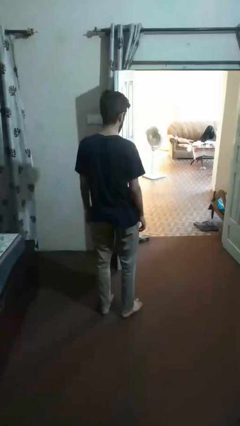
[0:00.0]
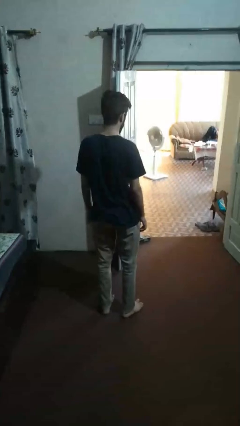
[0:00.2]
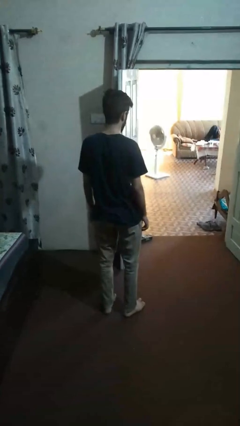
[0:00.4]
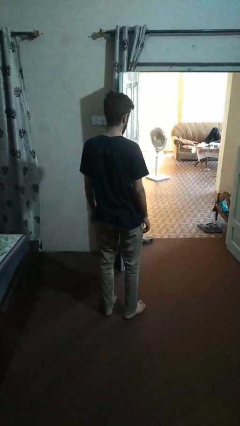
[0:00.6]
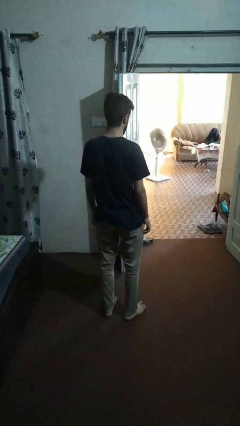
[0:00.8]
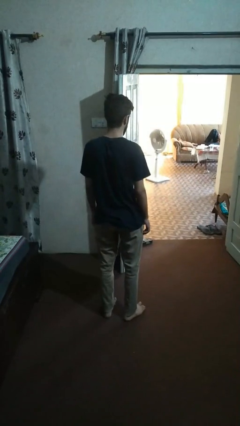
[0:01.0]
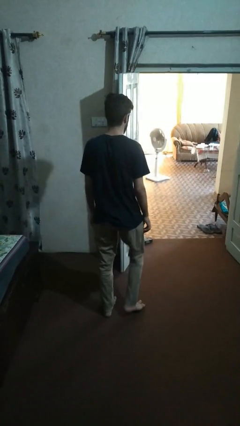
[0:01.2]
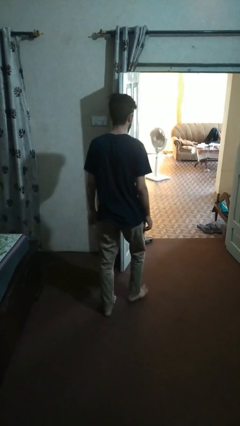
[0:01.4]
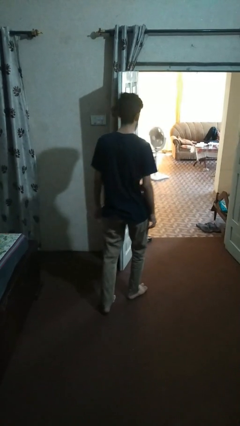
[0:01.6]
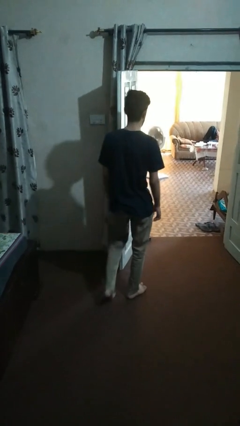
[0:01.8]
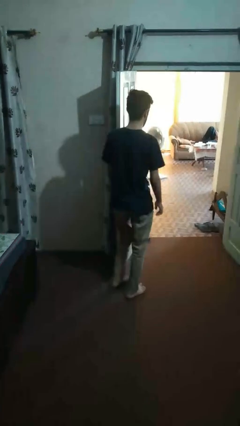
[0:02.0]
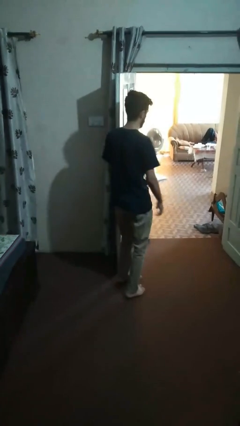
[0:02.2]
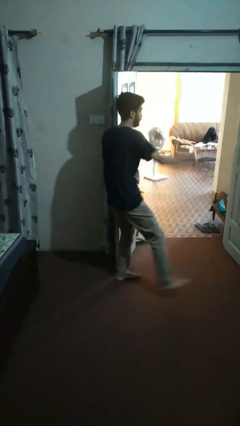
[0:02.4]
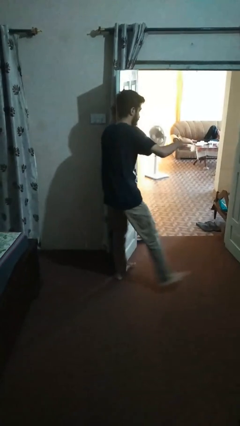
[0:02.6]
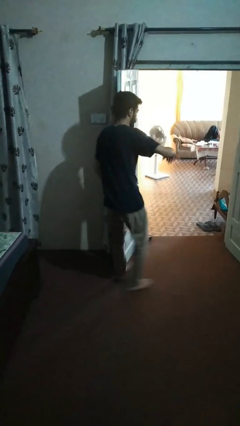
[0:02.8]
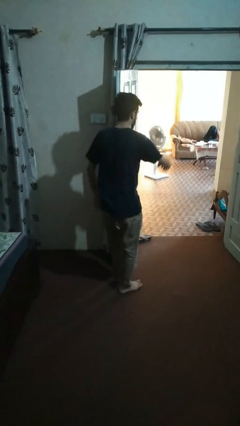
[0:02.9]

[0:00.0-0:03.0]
person bumps into wall

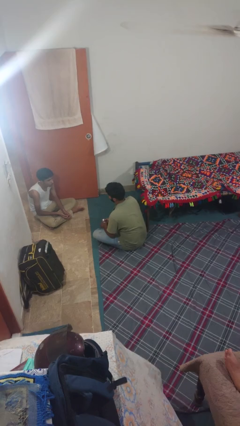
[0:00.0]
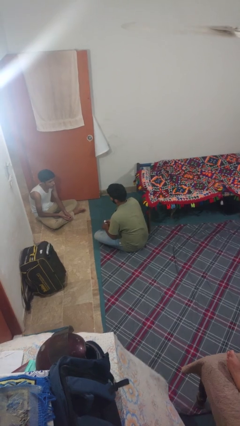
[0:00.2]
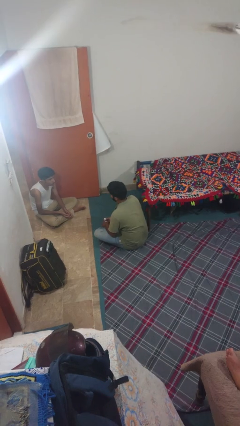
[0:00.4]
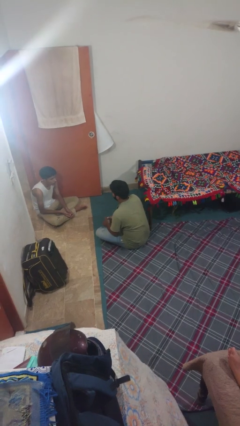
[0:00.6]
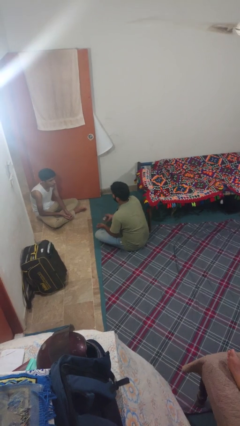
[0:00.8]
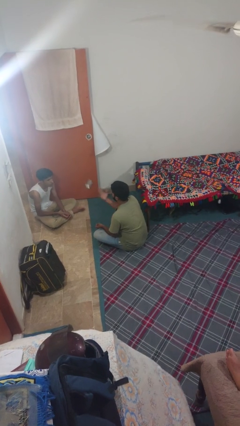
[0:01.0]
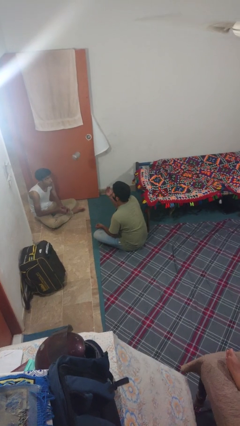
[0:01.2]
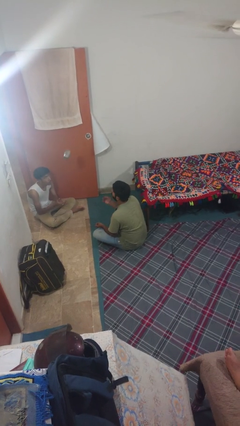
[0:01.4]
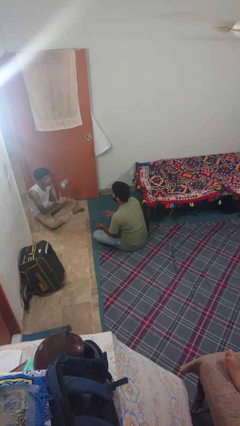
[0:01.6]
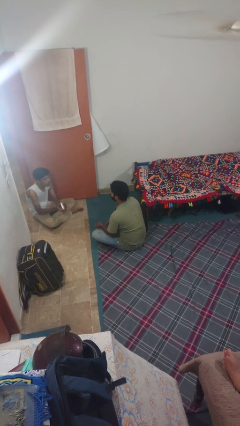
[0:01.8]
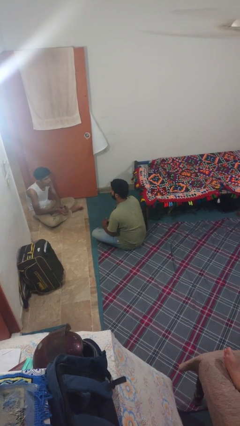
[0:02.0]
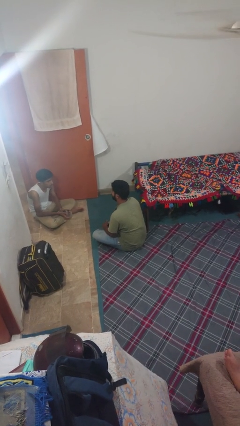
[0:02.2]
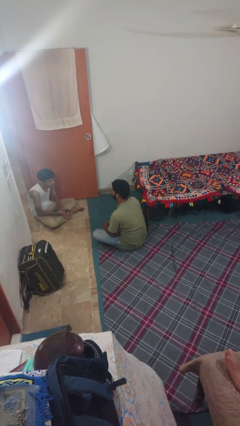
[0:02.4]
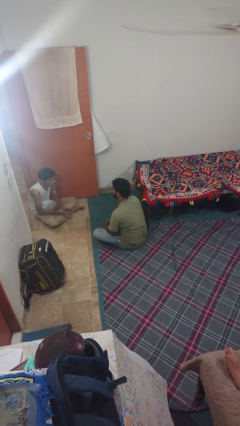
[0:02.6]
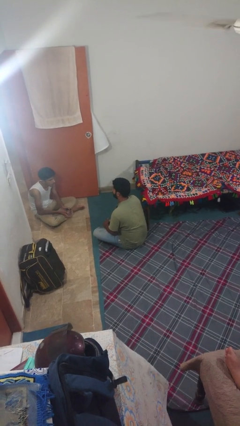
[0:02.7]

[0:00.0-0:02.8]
person throws object to person

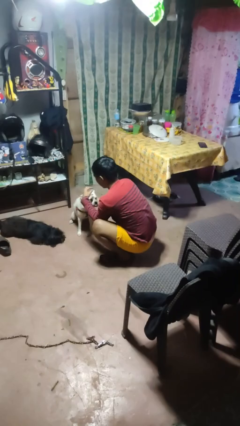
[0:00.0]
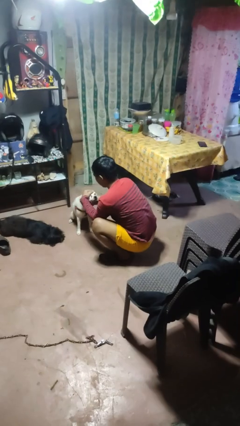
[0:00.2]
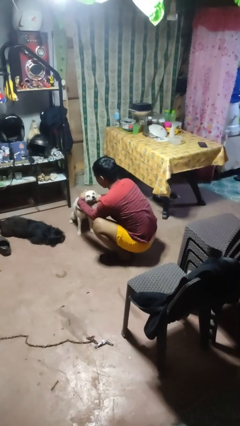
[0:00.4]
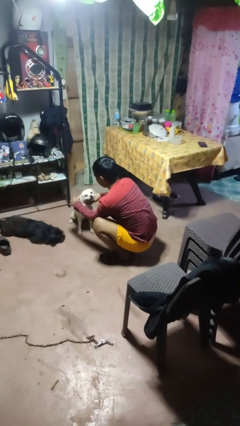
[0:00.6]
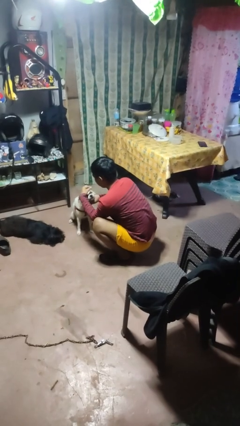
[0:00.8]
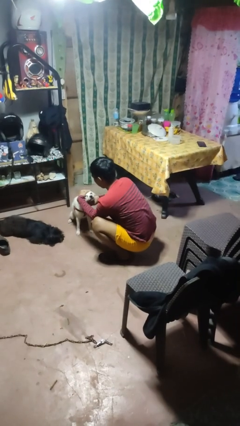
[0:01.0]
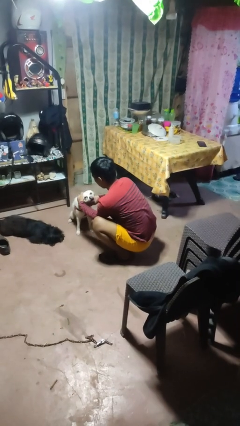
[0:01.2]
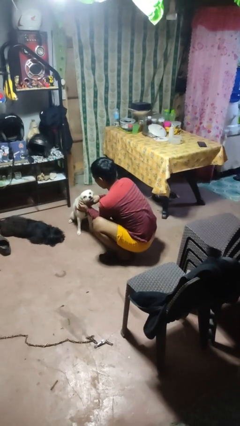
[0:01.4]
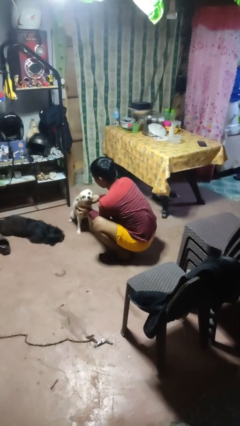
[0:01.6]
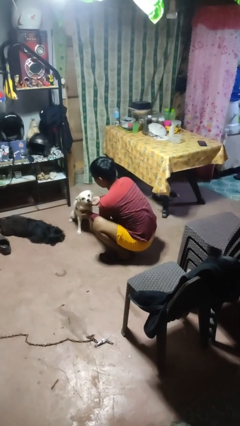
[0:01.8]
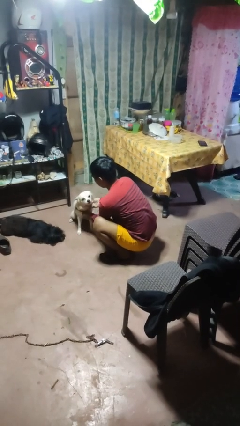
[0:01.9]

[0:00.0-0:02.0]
person pets dog

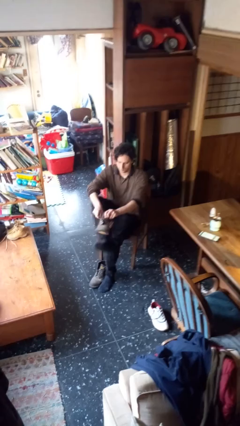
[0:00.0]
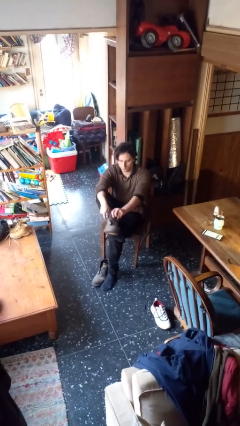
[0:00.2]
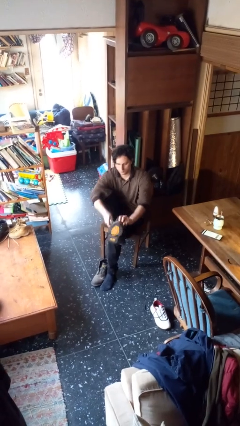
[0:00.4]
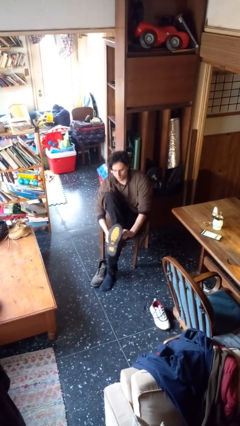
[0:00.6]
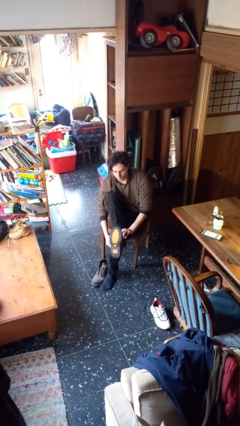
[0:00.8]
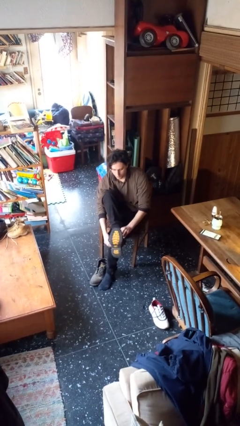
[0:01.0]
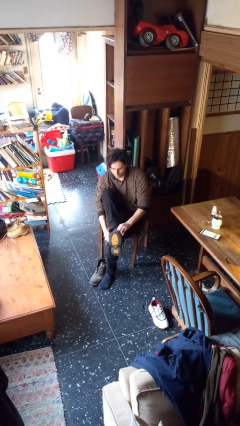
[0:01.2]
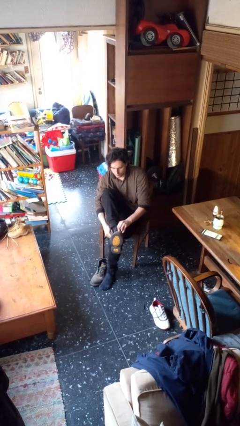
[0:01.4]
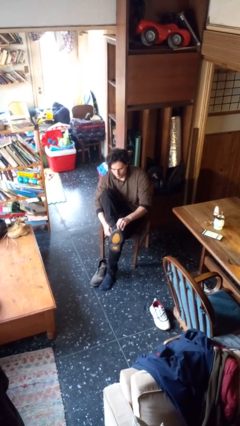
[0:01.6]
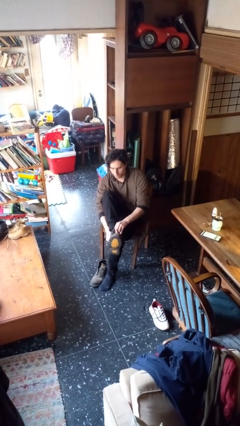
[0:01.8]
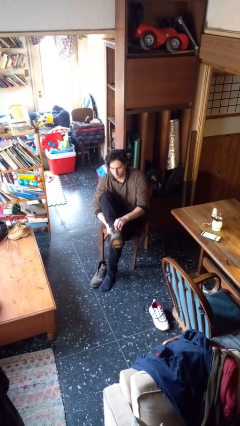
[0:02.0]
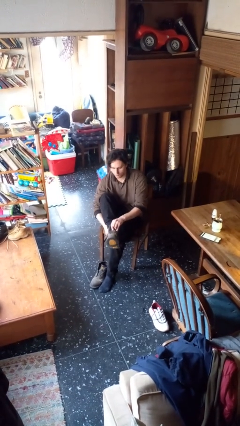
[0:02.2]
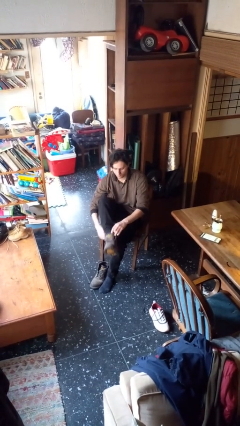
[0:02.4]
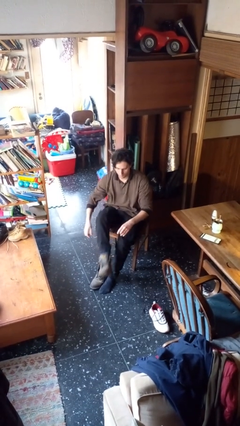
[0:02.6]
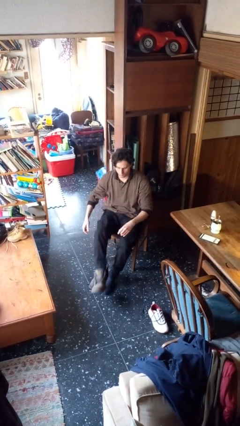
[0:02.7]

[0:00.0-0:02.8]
person puts on boots

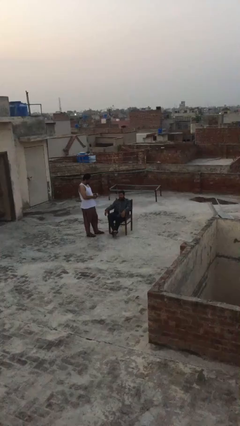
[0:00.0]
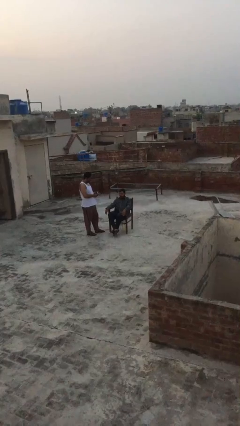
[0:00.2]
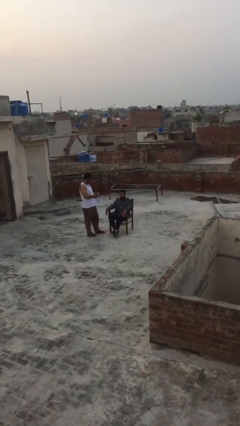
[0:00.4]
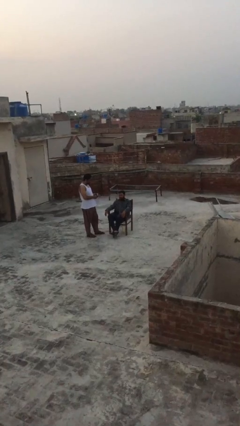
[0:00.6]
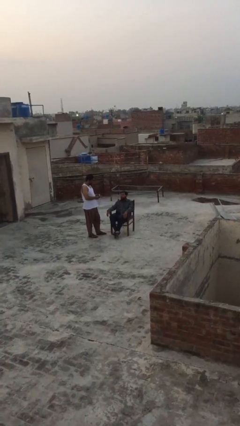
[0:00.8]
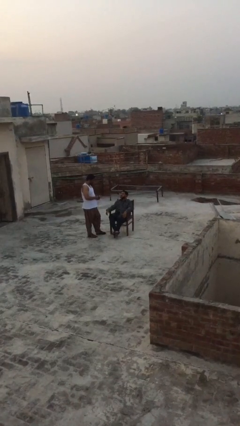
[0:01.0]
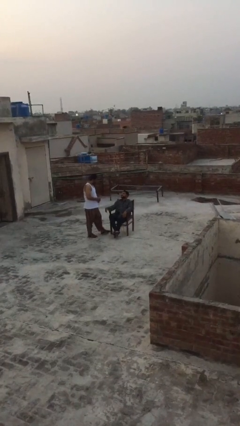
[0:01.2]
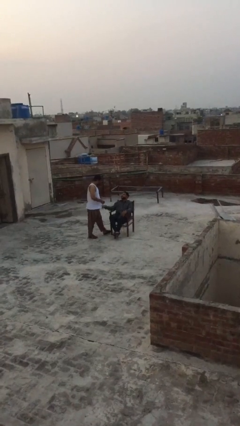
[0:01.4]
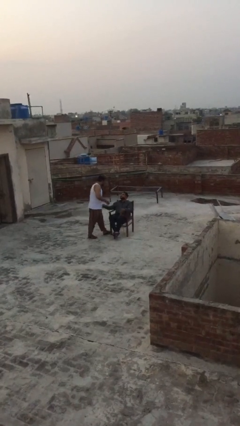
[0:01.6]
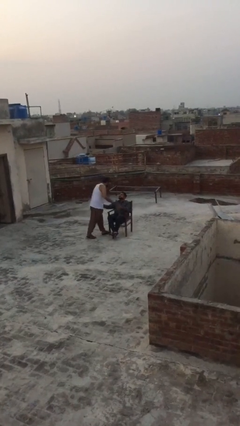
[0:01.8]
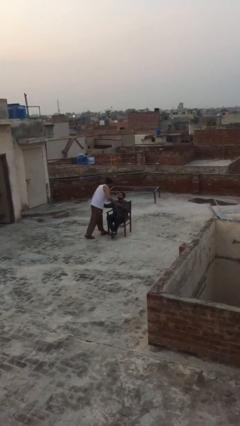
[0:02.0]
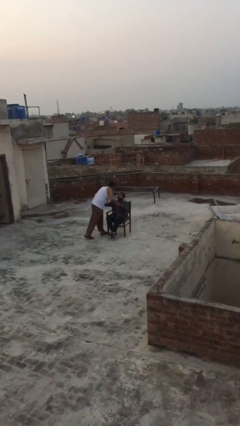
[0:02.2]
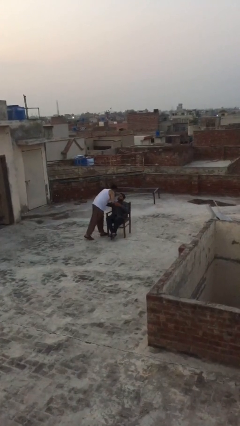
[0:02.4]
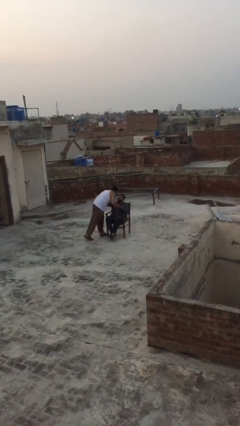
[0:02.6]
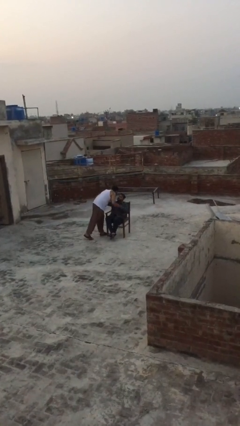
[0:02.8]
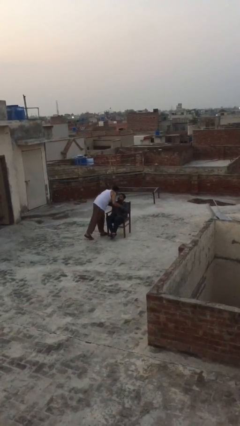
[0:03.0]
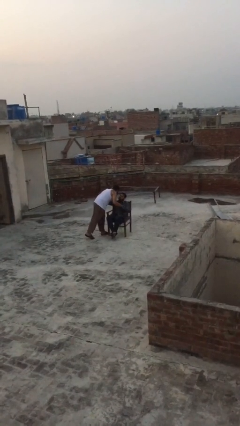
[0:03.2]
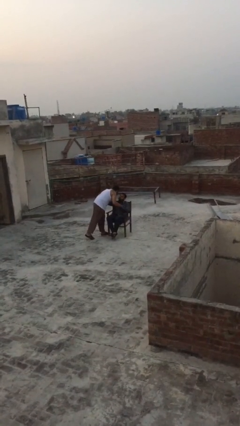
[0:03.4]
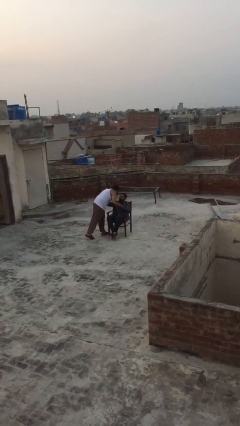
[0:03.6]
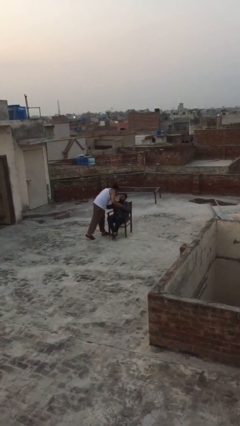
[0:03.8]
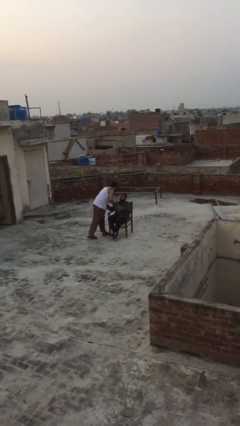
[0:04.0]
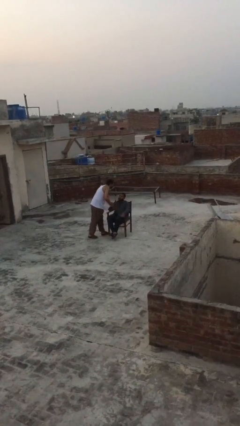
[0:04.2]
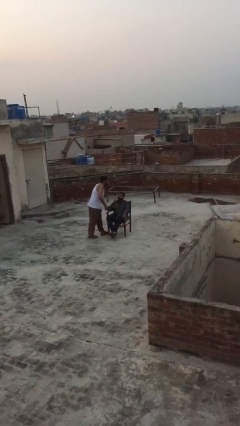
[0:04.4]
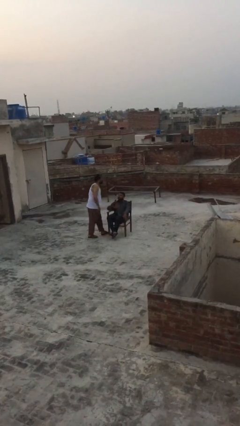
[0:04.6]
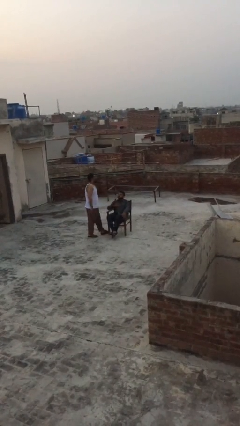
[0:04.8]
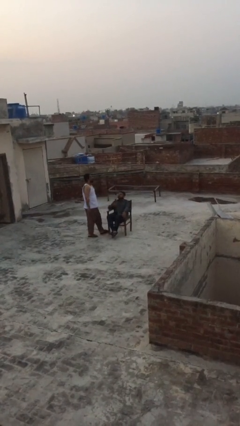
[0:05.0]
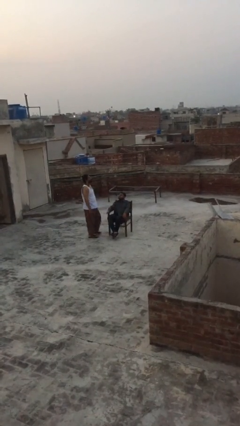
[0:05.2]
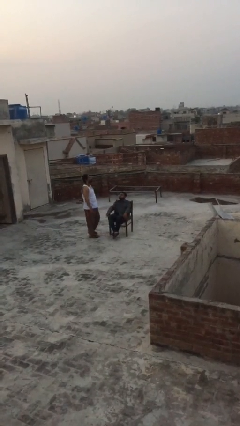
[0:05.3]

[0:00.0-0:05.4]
person embraces person

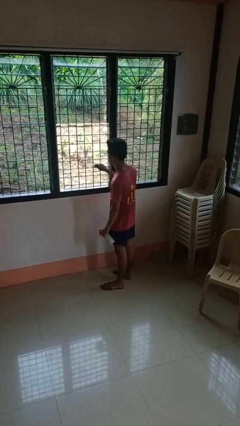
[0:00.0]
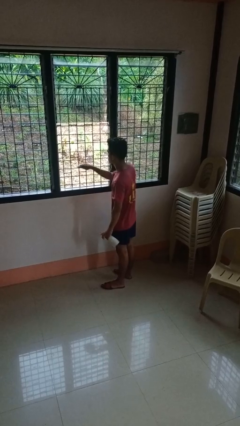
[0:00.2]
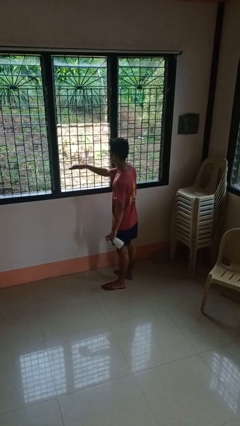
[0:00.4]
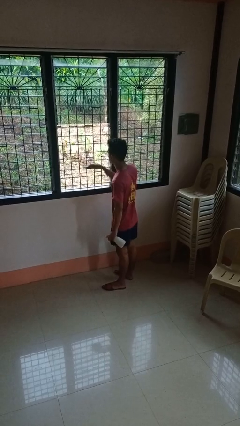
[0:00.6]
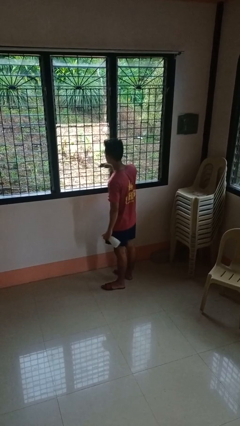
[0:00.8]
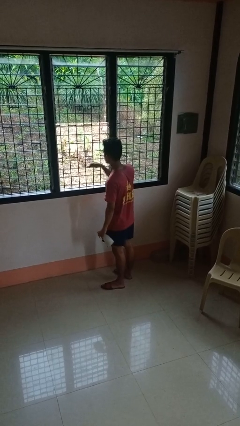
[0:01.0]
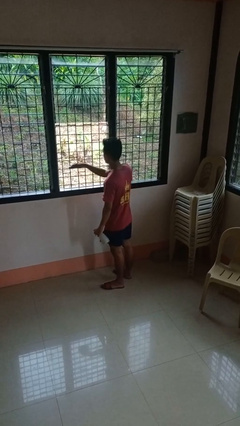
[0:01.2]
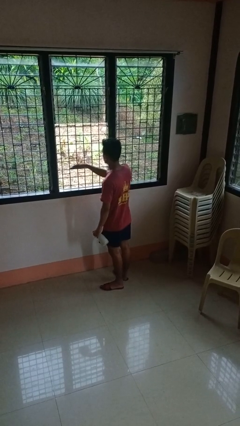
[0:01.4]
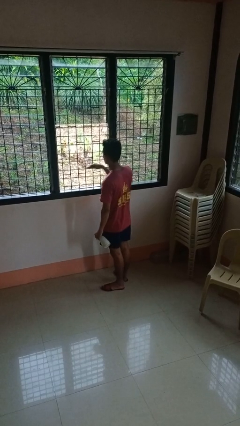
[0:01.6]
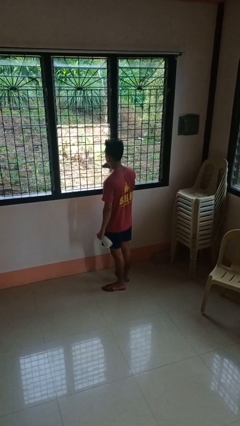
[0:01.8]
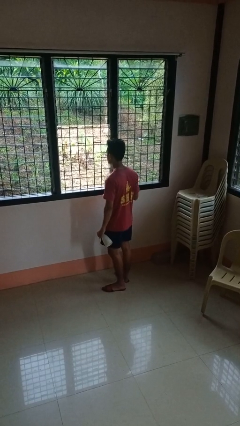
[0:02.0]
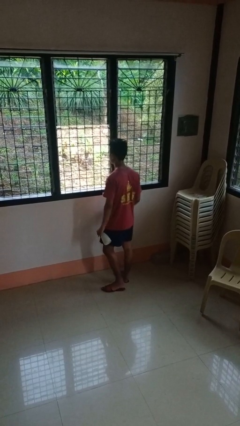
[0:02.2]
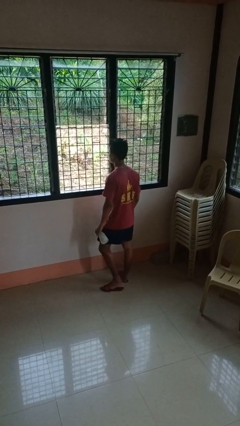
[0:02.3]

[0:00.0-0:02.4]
person washes window
